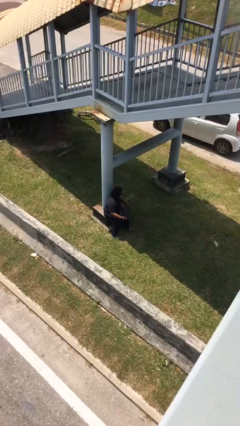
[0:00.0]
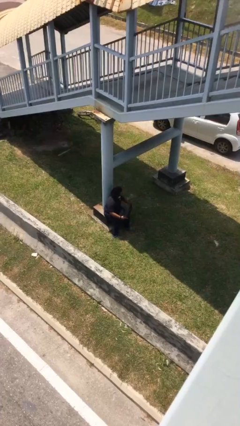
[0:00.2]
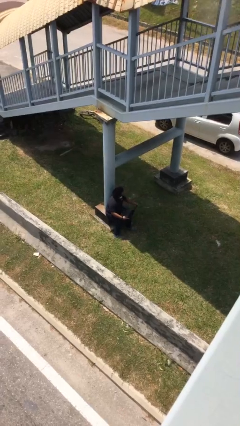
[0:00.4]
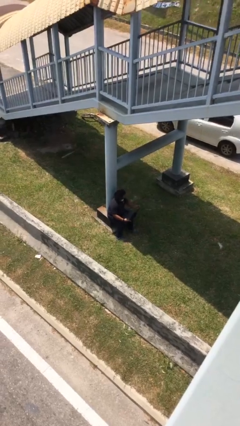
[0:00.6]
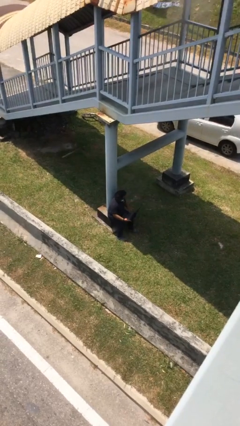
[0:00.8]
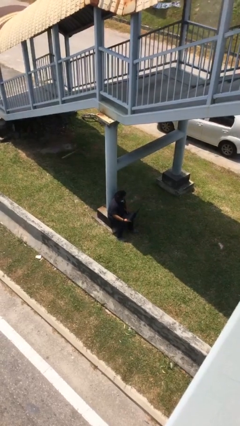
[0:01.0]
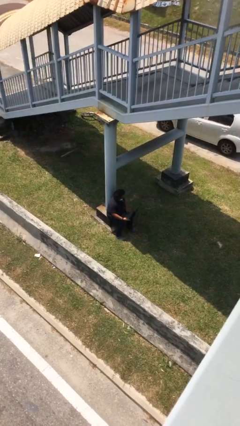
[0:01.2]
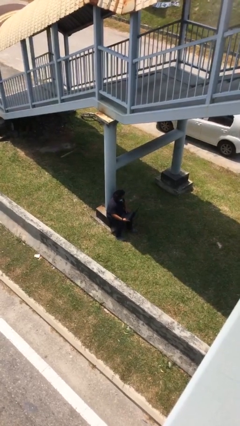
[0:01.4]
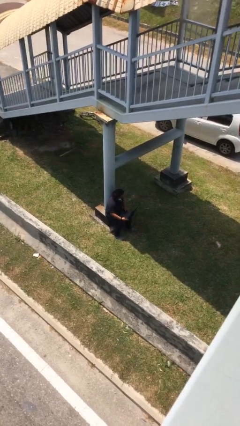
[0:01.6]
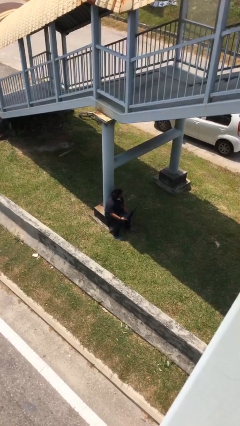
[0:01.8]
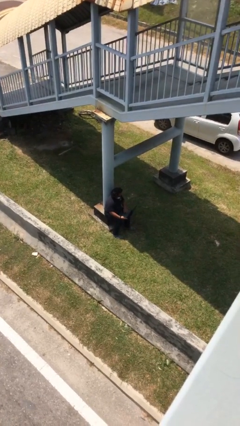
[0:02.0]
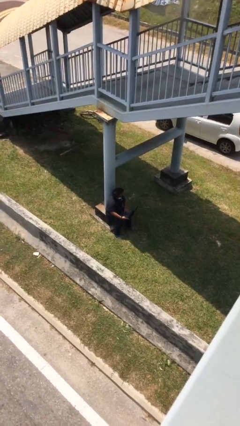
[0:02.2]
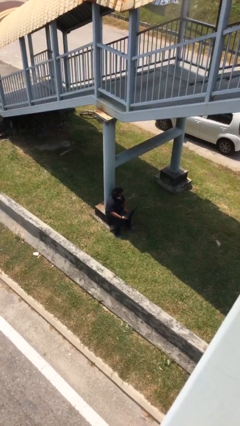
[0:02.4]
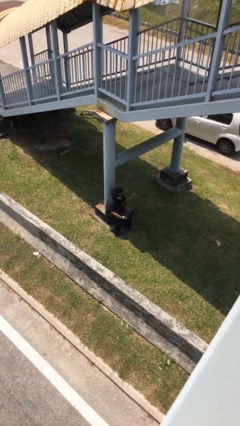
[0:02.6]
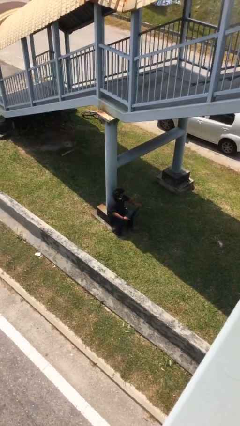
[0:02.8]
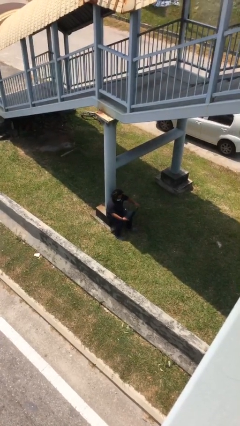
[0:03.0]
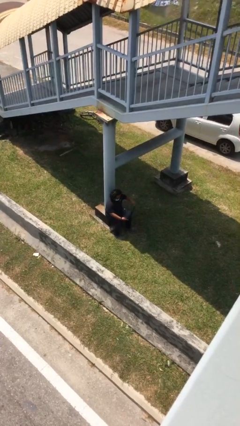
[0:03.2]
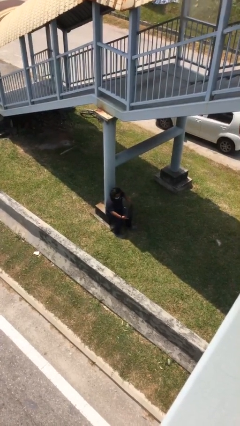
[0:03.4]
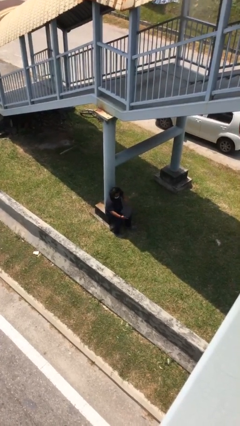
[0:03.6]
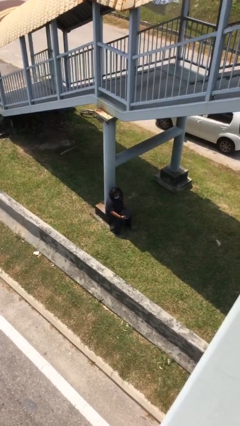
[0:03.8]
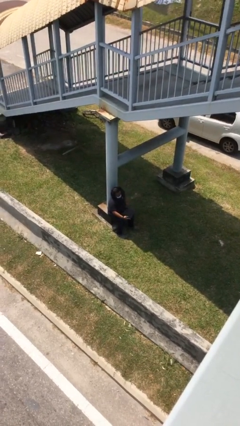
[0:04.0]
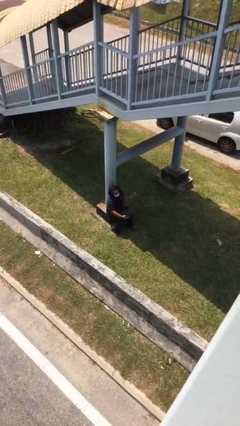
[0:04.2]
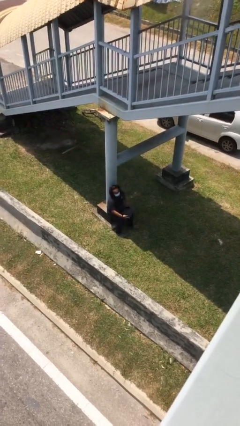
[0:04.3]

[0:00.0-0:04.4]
person interacts with laptop

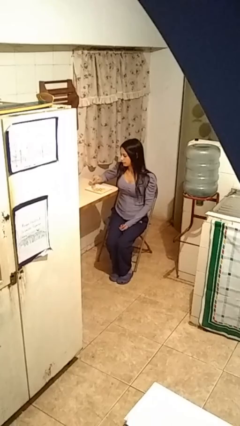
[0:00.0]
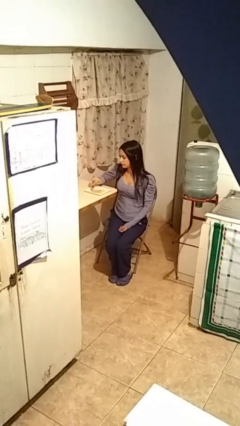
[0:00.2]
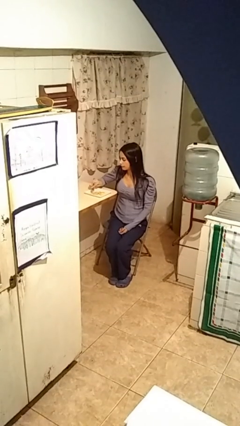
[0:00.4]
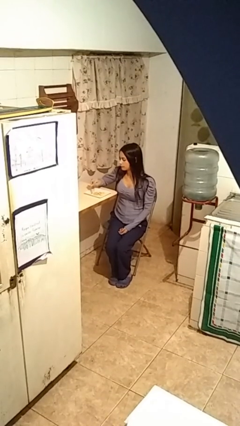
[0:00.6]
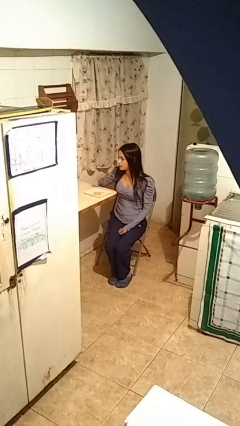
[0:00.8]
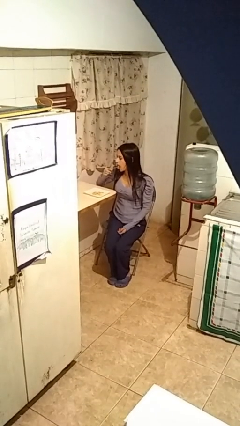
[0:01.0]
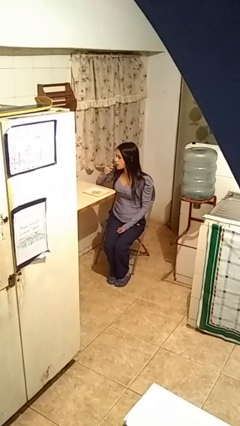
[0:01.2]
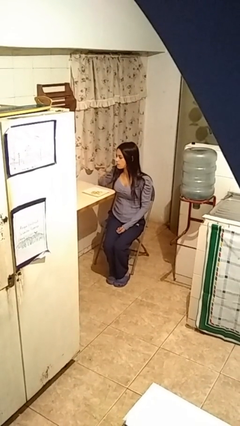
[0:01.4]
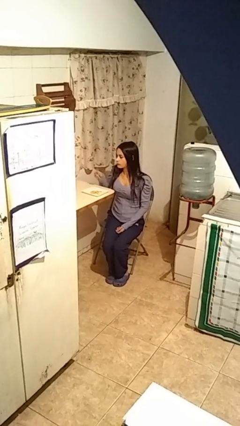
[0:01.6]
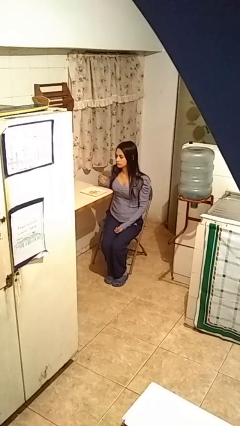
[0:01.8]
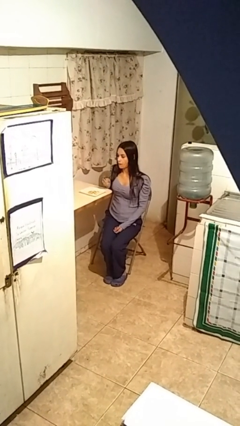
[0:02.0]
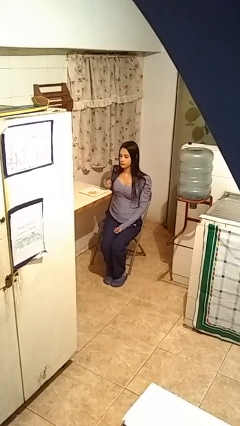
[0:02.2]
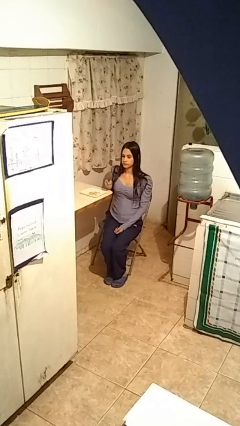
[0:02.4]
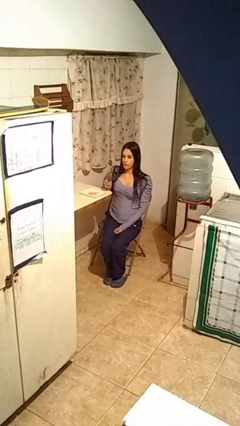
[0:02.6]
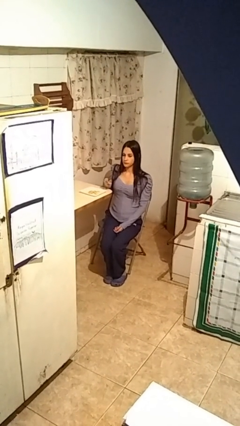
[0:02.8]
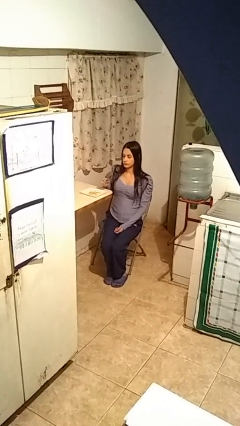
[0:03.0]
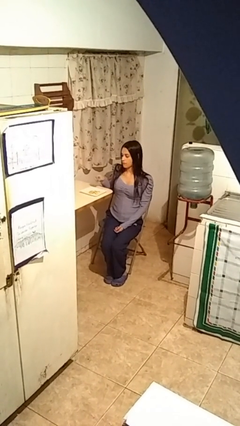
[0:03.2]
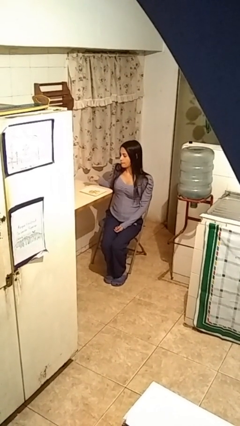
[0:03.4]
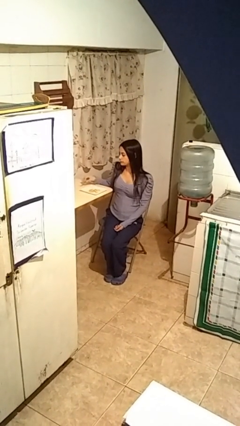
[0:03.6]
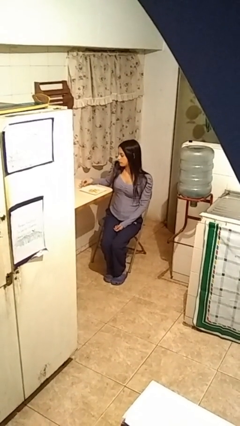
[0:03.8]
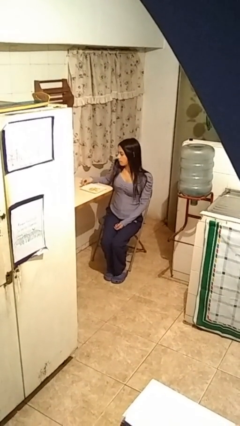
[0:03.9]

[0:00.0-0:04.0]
person eats with utensil

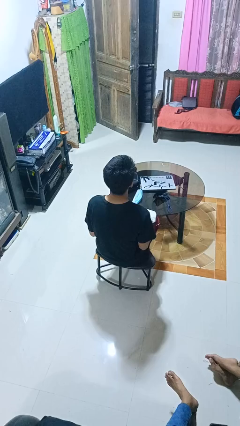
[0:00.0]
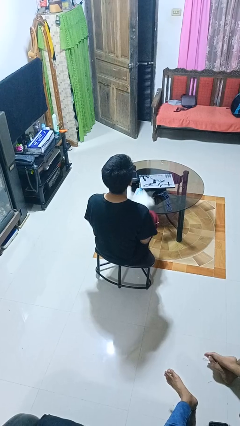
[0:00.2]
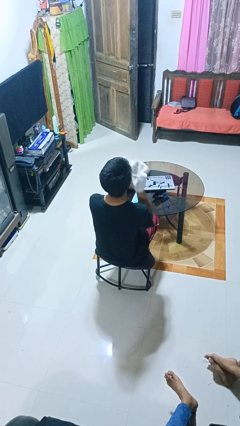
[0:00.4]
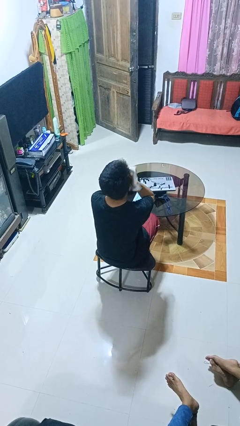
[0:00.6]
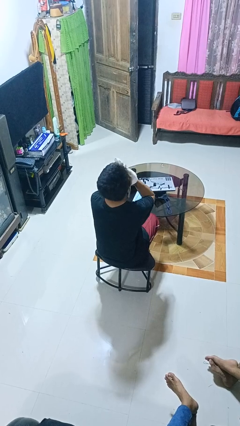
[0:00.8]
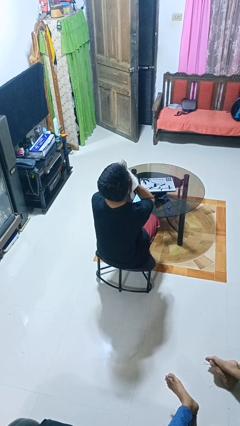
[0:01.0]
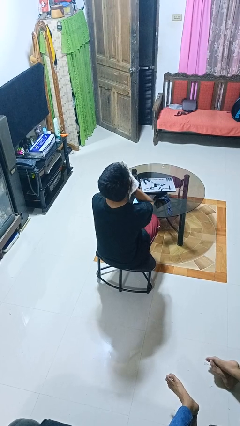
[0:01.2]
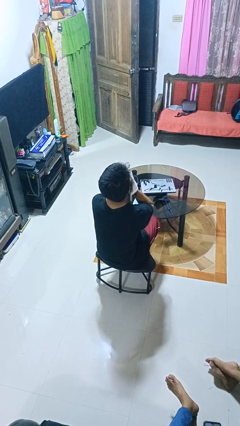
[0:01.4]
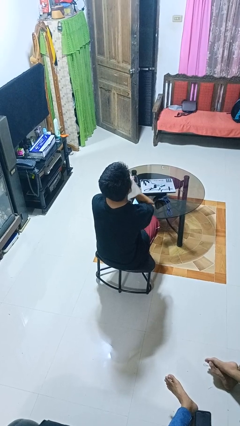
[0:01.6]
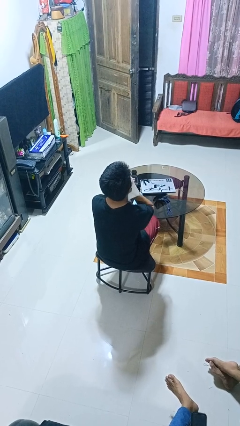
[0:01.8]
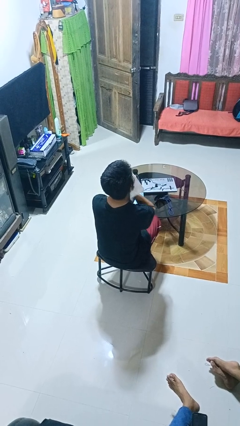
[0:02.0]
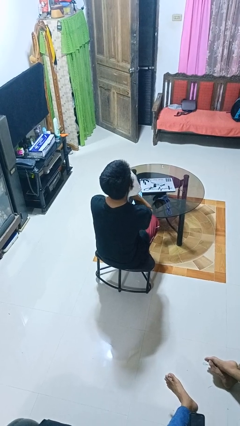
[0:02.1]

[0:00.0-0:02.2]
person wipes mouth with napkin

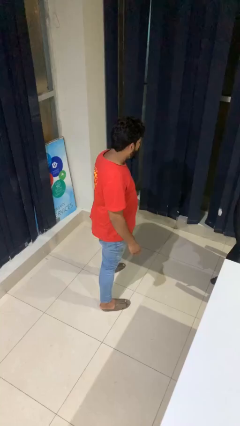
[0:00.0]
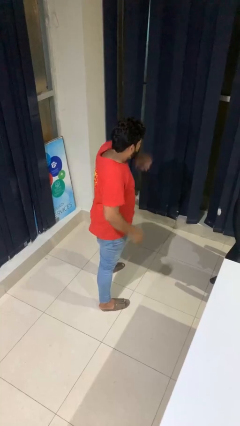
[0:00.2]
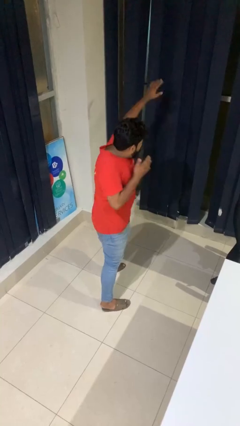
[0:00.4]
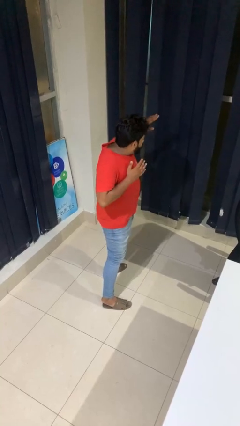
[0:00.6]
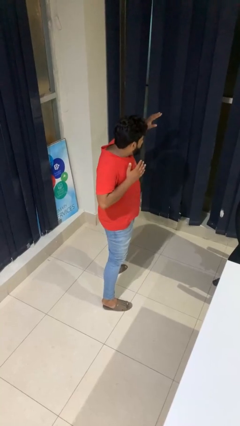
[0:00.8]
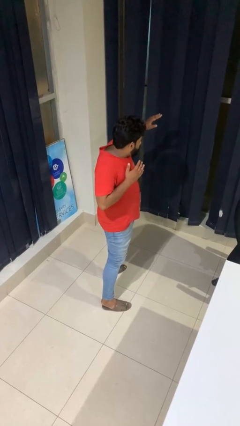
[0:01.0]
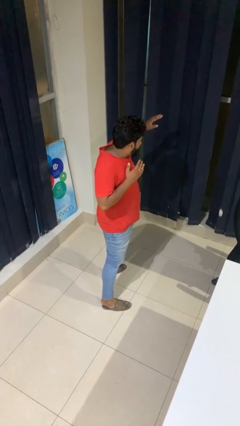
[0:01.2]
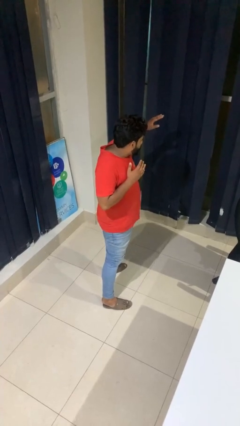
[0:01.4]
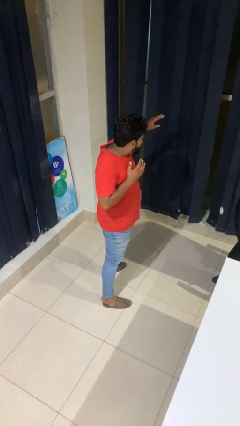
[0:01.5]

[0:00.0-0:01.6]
person karate chop

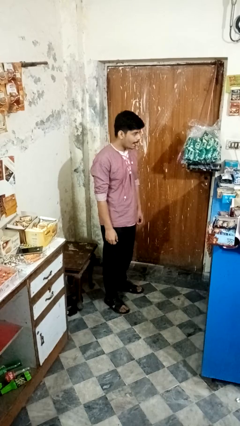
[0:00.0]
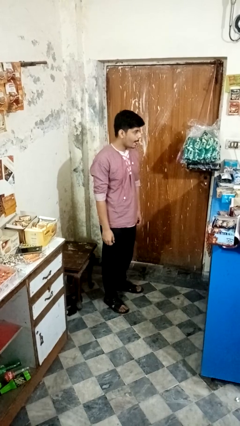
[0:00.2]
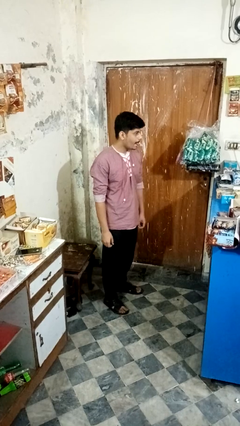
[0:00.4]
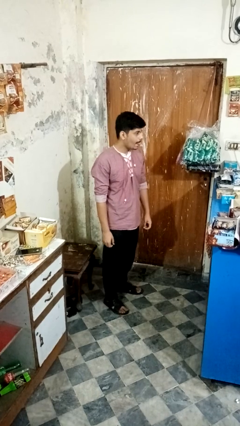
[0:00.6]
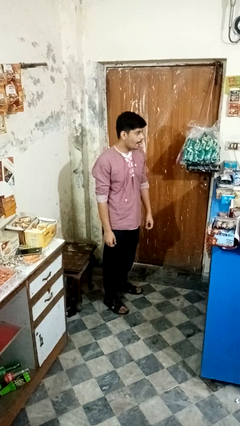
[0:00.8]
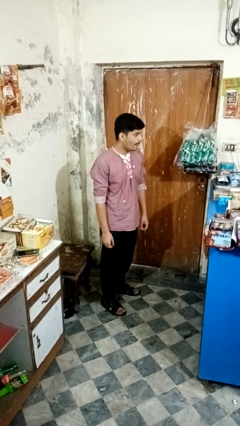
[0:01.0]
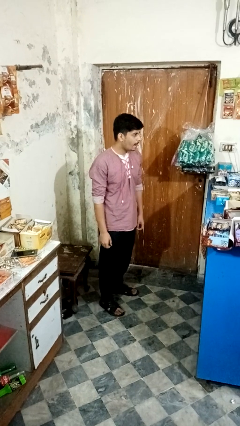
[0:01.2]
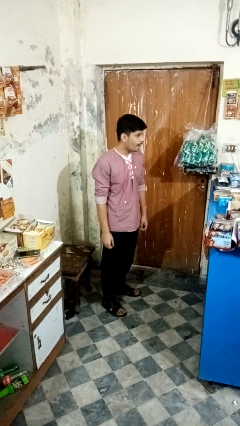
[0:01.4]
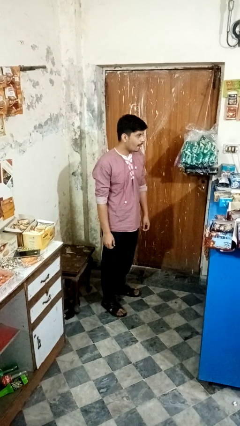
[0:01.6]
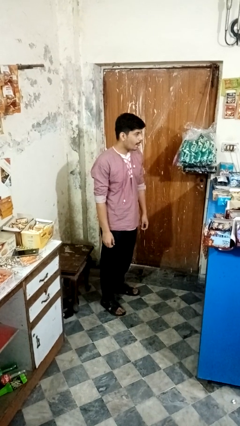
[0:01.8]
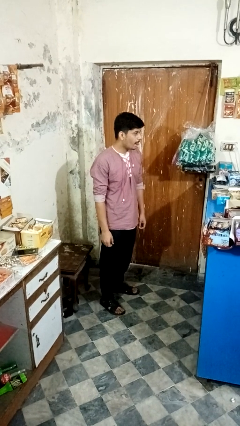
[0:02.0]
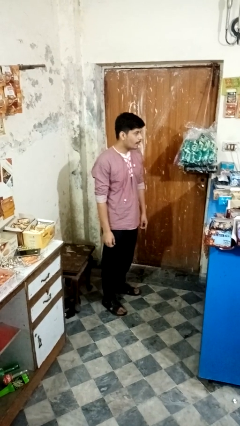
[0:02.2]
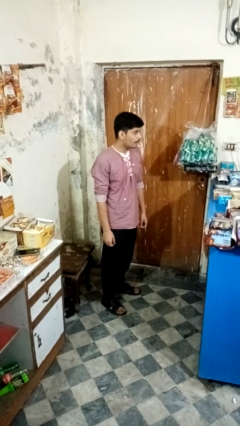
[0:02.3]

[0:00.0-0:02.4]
person sticks out tongue

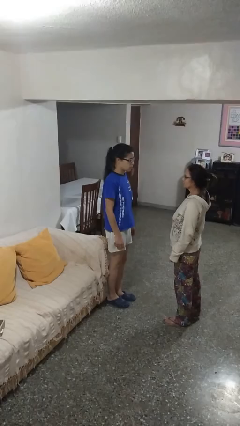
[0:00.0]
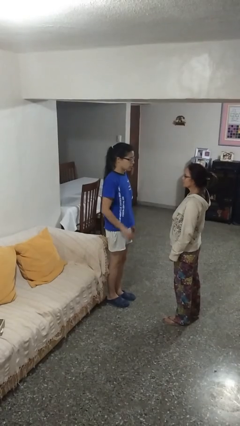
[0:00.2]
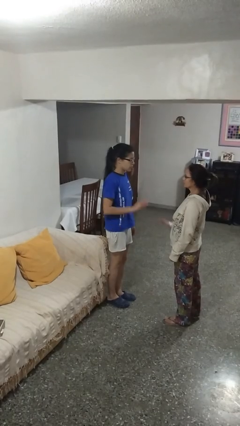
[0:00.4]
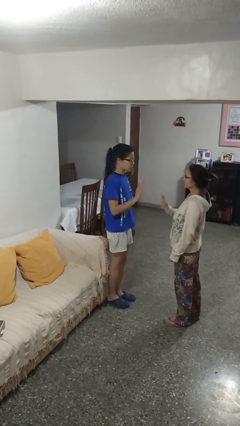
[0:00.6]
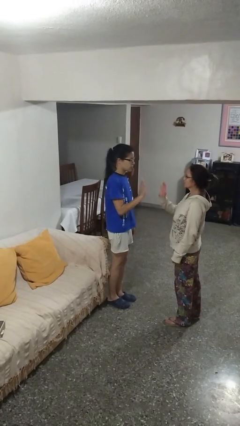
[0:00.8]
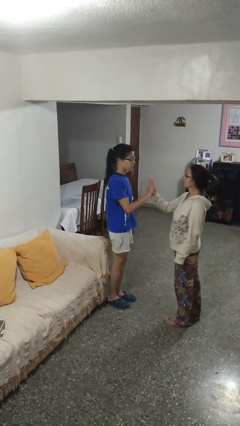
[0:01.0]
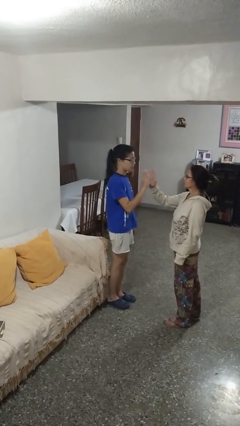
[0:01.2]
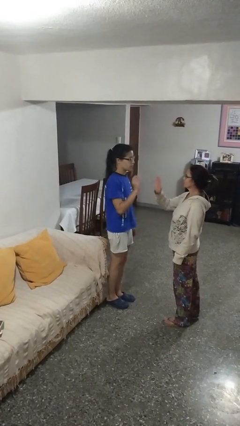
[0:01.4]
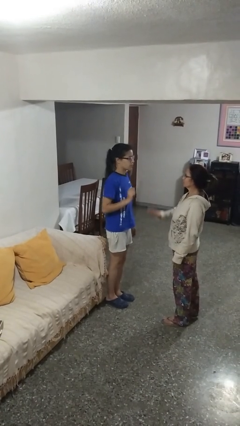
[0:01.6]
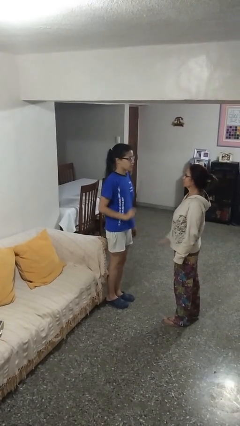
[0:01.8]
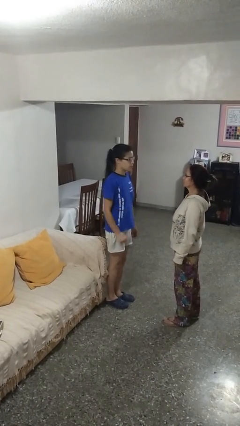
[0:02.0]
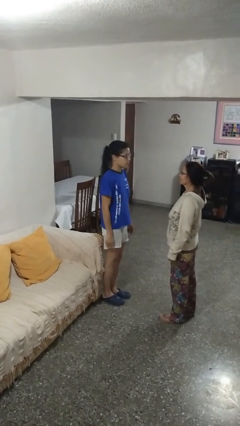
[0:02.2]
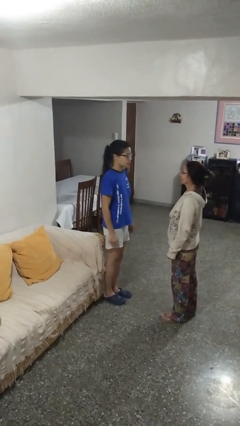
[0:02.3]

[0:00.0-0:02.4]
person highfives hand

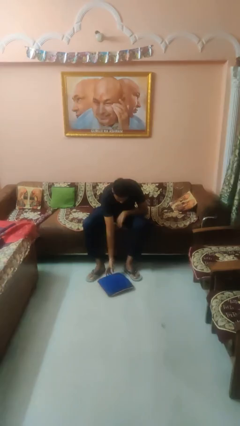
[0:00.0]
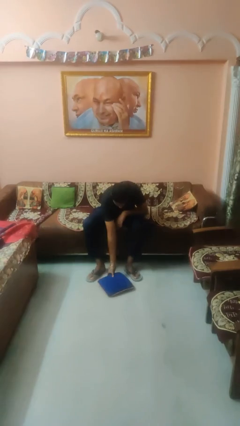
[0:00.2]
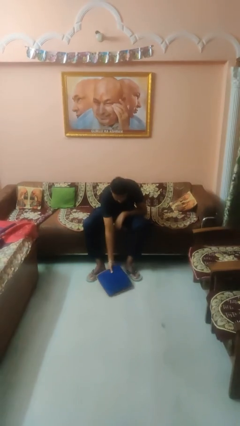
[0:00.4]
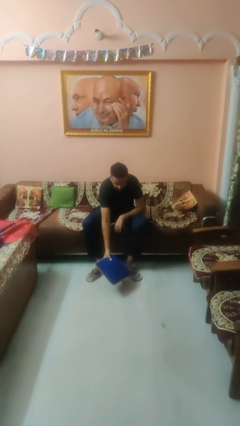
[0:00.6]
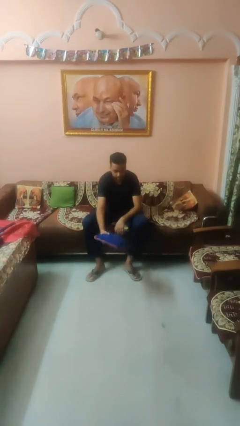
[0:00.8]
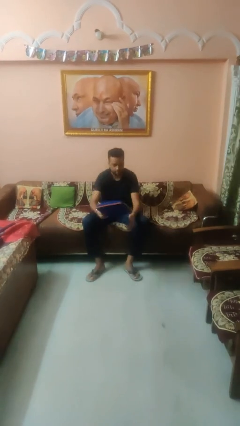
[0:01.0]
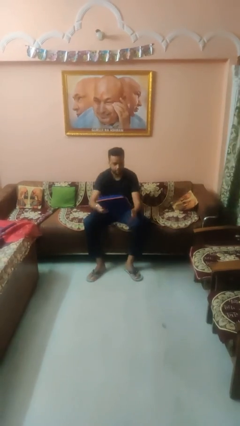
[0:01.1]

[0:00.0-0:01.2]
person picks up object from floor
